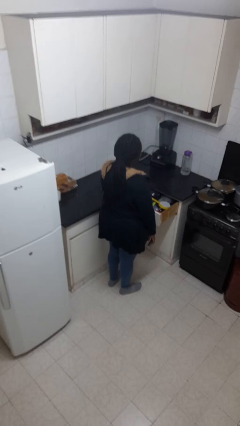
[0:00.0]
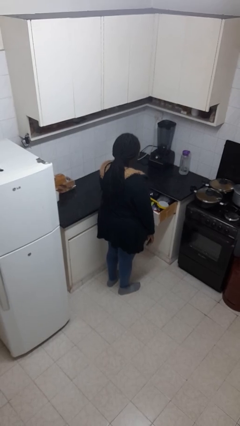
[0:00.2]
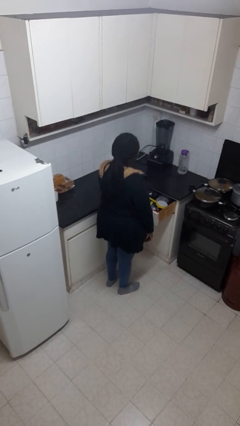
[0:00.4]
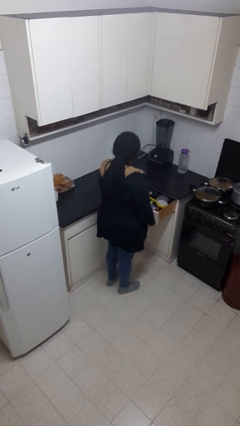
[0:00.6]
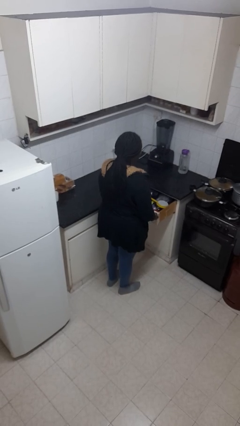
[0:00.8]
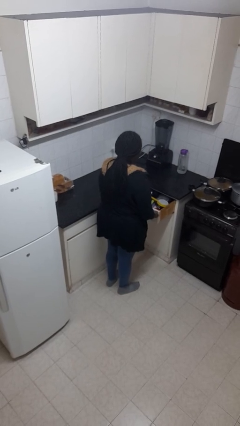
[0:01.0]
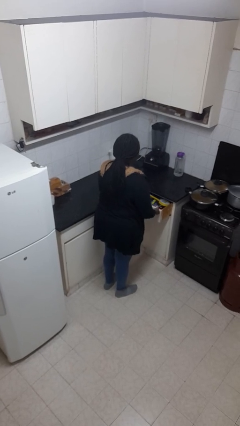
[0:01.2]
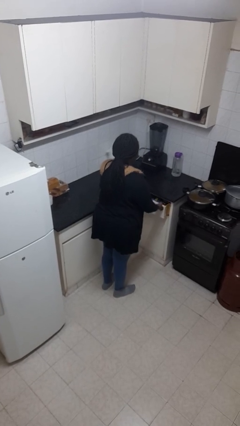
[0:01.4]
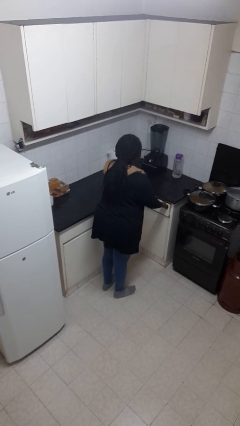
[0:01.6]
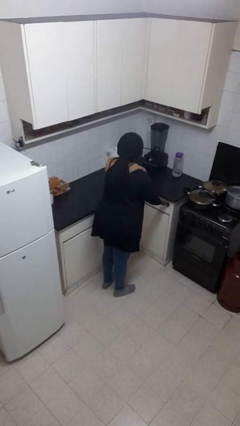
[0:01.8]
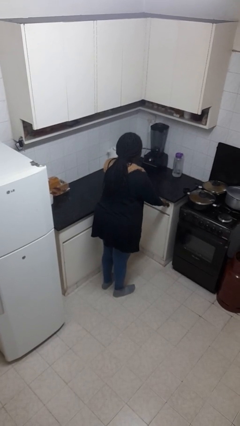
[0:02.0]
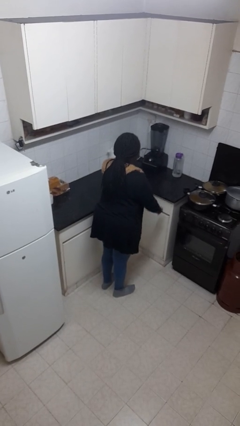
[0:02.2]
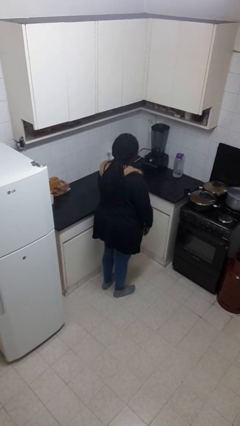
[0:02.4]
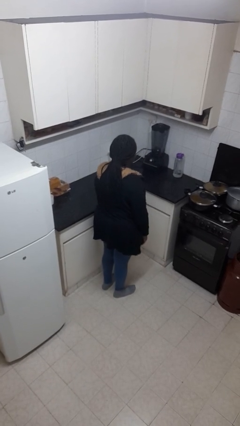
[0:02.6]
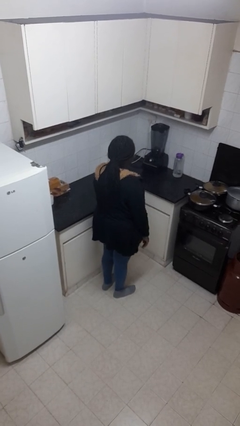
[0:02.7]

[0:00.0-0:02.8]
person closes kitchen drawer

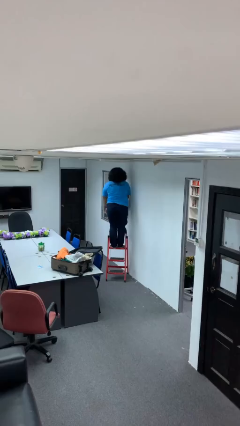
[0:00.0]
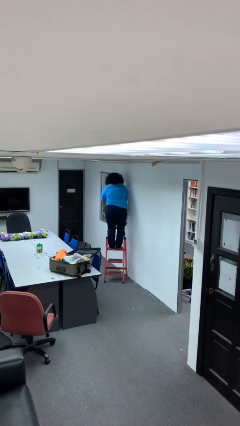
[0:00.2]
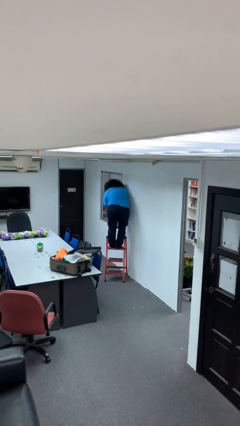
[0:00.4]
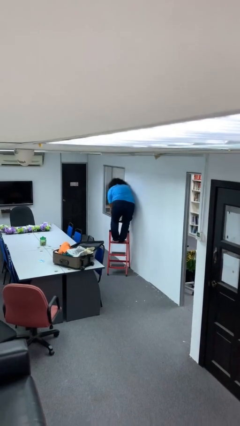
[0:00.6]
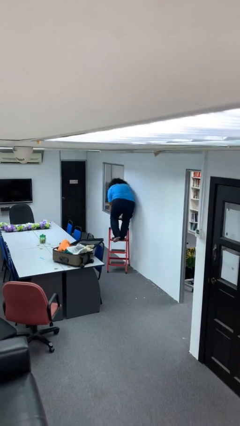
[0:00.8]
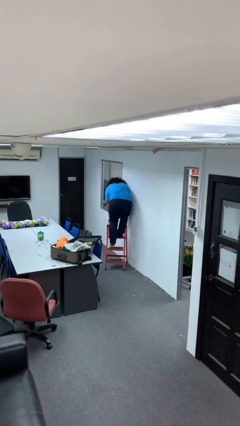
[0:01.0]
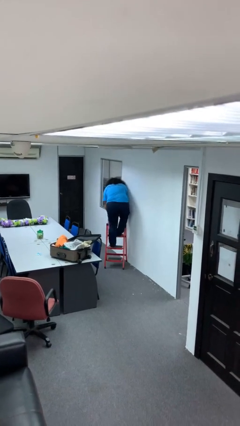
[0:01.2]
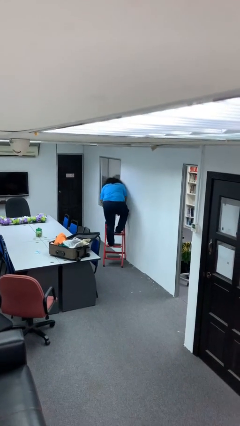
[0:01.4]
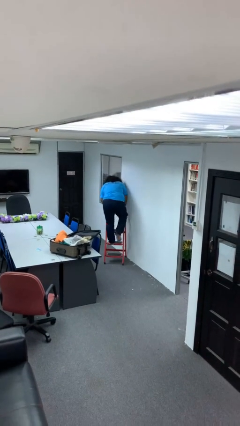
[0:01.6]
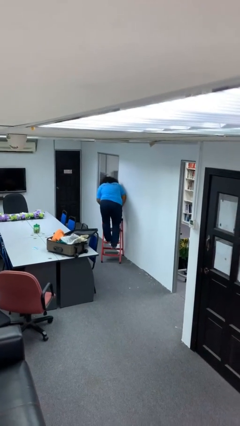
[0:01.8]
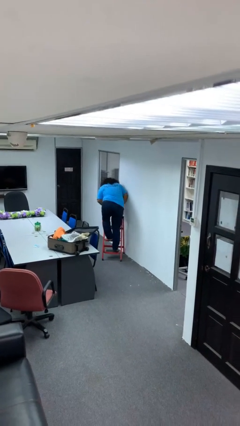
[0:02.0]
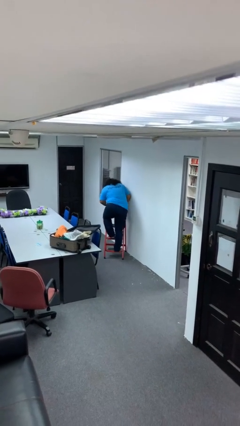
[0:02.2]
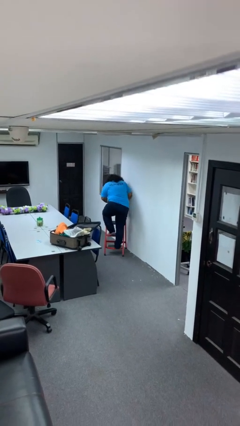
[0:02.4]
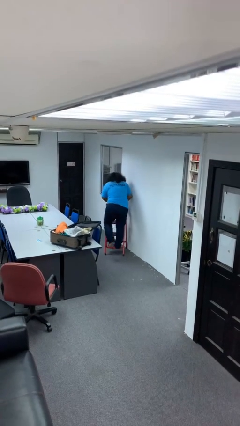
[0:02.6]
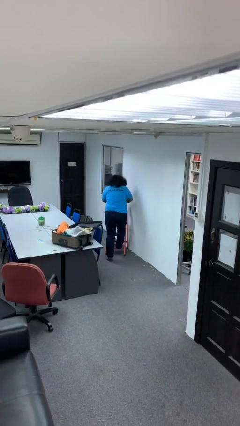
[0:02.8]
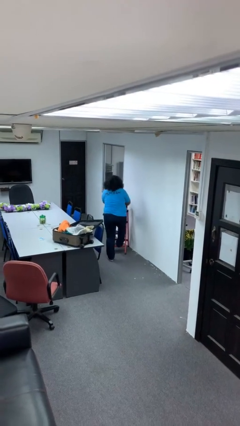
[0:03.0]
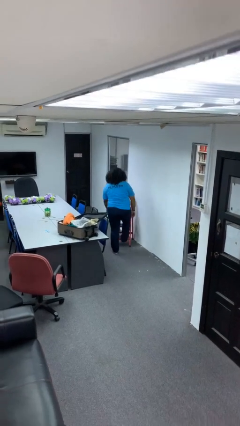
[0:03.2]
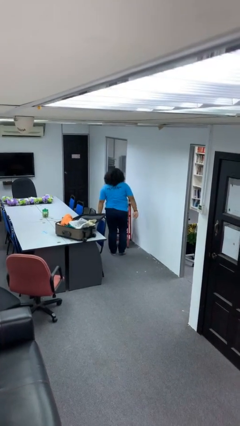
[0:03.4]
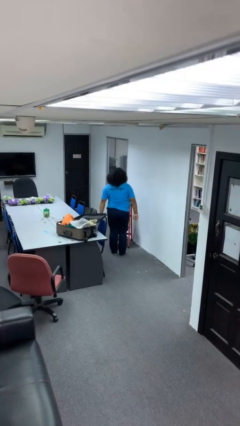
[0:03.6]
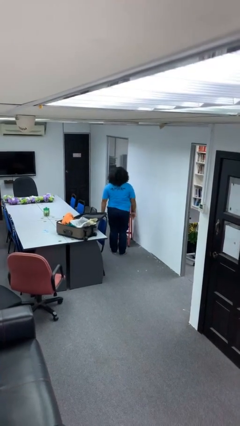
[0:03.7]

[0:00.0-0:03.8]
person climbs down ladder

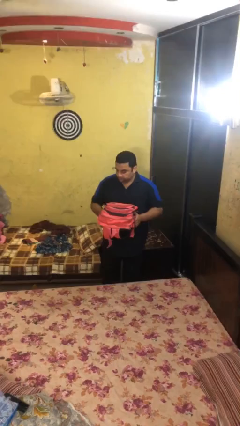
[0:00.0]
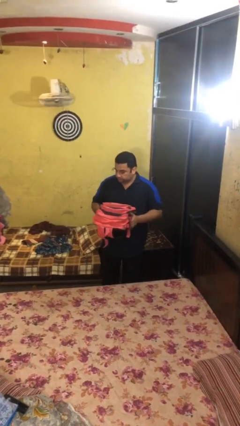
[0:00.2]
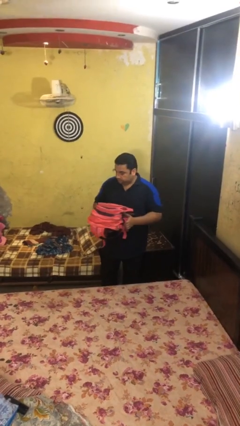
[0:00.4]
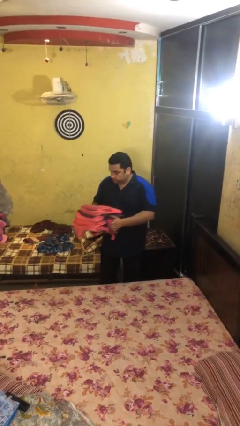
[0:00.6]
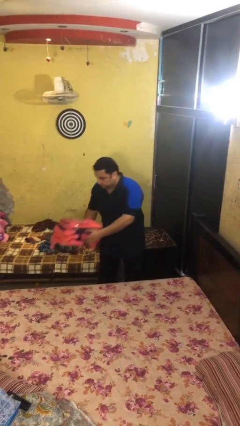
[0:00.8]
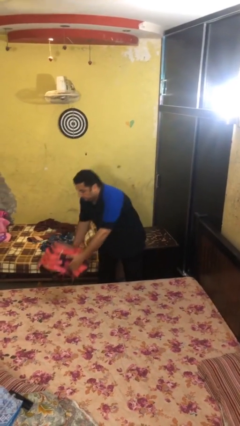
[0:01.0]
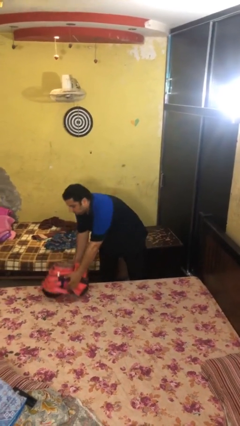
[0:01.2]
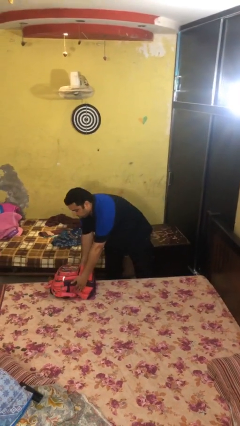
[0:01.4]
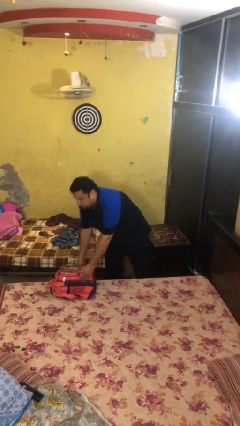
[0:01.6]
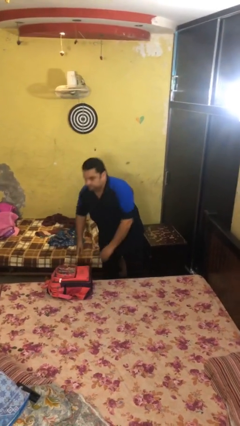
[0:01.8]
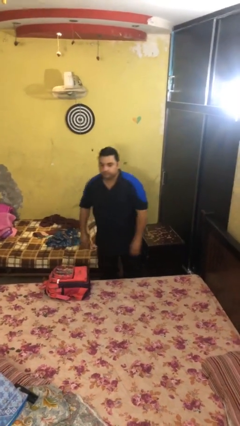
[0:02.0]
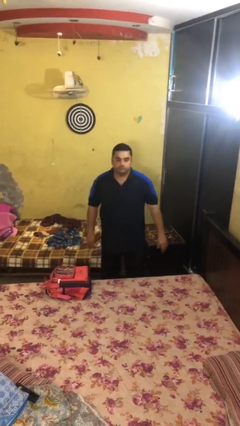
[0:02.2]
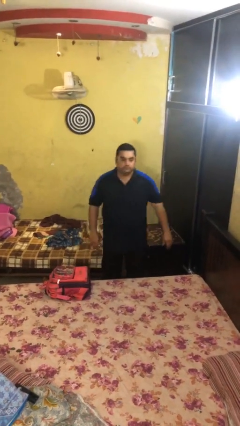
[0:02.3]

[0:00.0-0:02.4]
person puts down object on bed

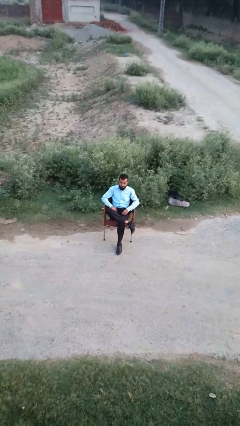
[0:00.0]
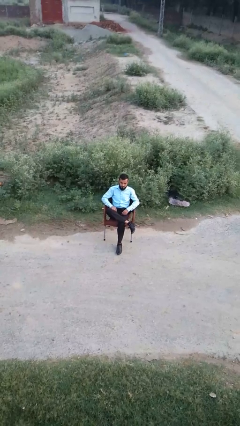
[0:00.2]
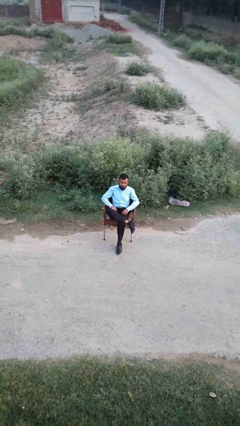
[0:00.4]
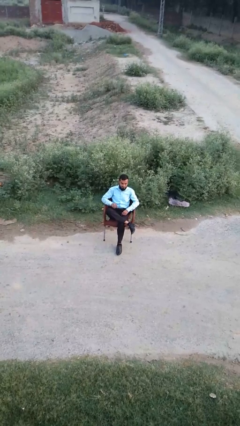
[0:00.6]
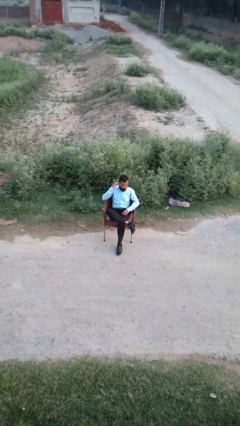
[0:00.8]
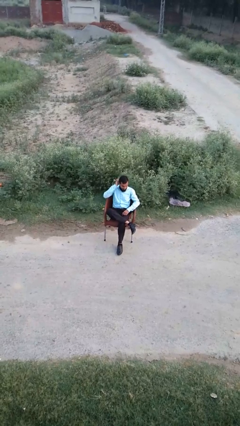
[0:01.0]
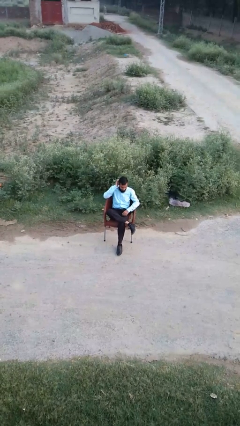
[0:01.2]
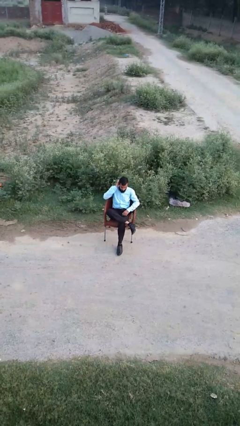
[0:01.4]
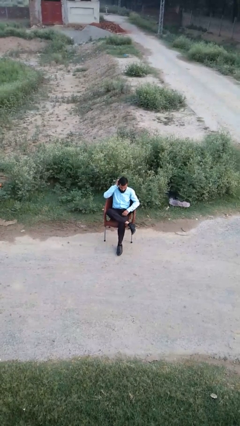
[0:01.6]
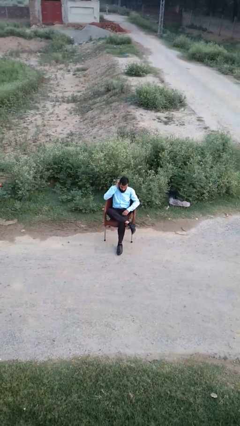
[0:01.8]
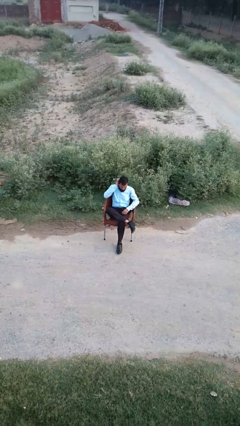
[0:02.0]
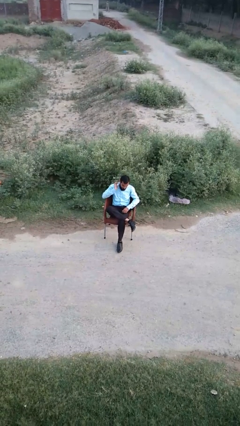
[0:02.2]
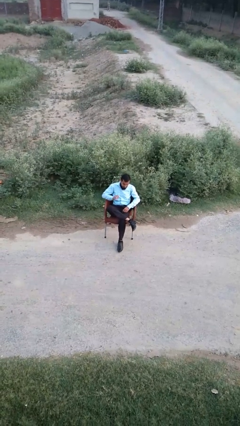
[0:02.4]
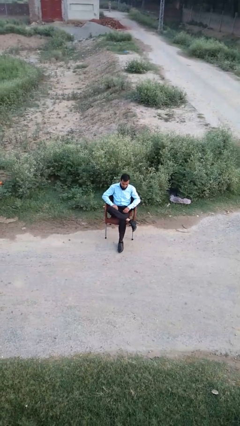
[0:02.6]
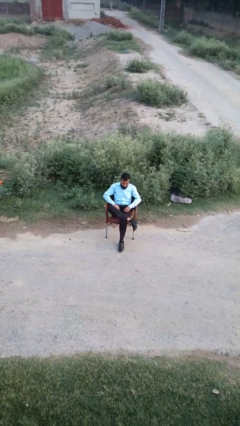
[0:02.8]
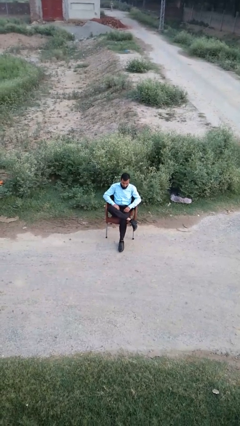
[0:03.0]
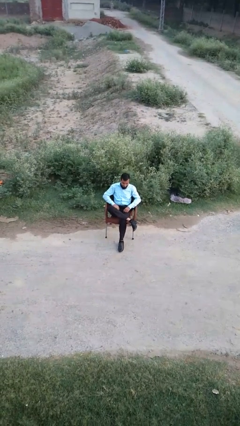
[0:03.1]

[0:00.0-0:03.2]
person scratches face

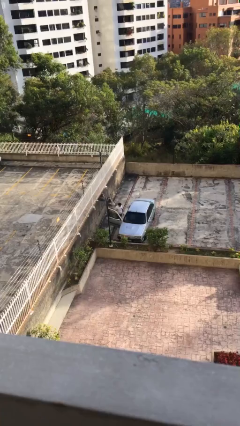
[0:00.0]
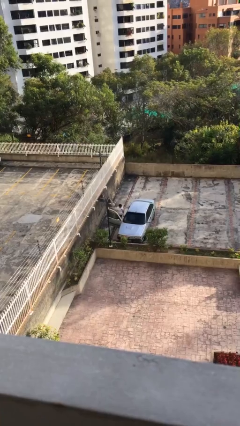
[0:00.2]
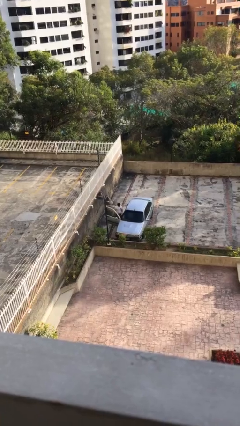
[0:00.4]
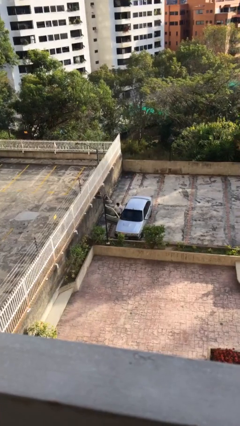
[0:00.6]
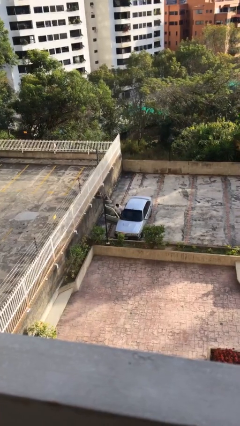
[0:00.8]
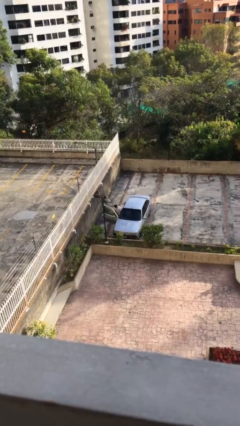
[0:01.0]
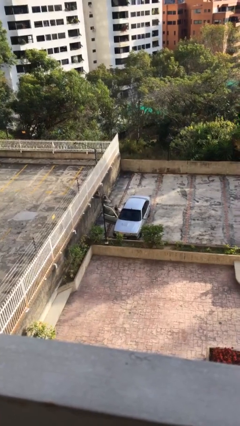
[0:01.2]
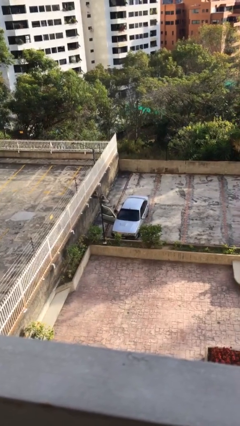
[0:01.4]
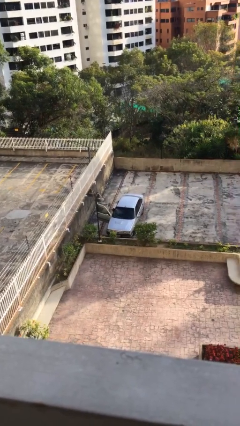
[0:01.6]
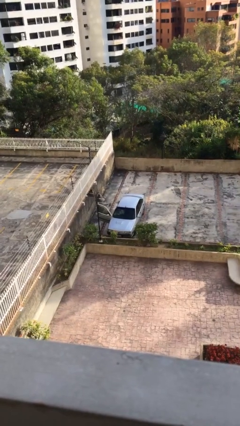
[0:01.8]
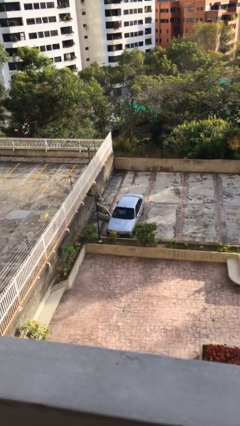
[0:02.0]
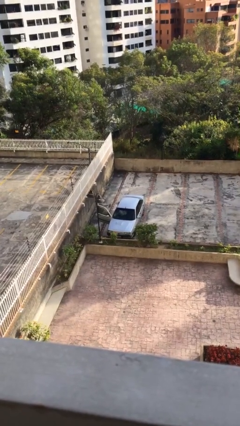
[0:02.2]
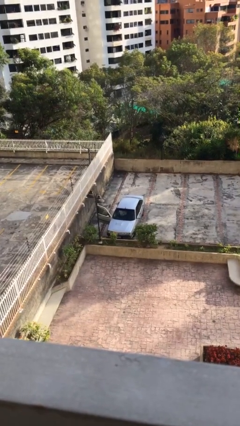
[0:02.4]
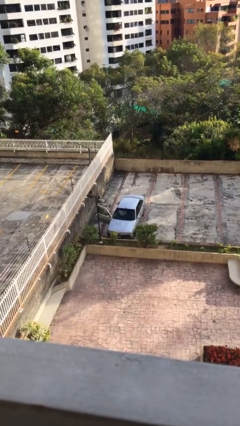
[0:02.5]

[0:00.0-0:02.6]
person enters car

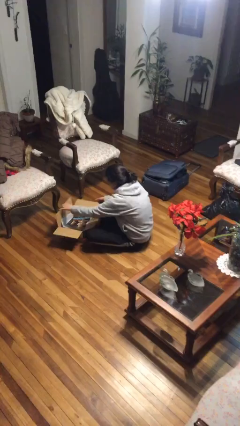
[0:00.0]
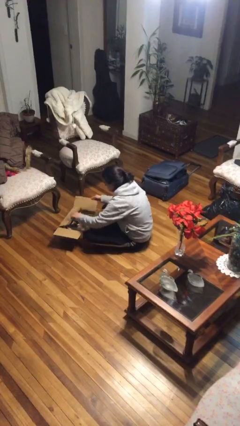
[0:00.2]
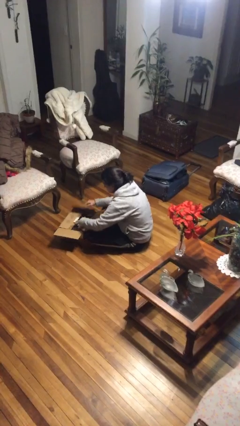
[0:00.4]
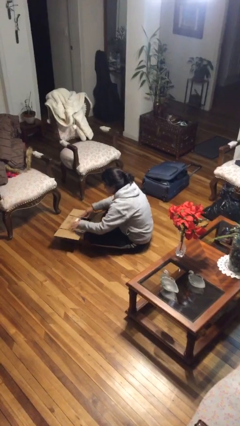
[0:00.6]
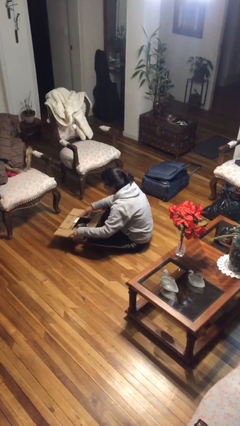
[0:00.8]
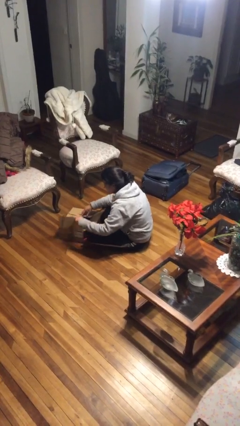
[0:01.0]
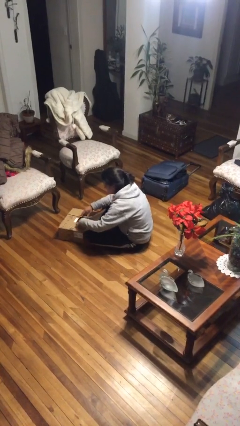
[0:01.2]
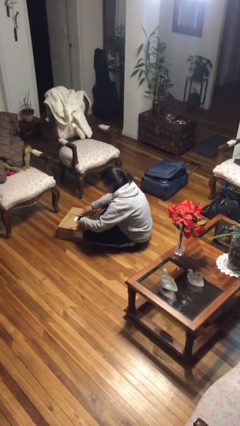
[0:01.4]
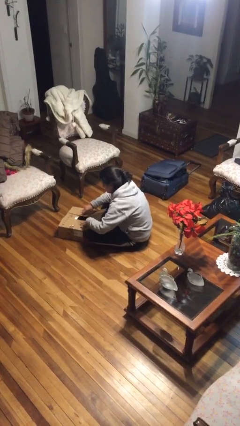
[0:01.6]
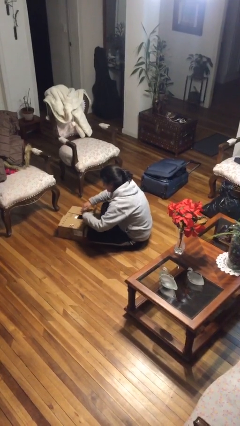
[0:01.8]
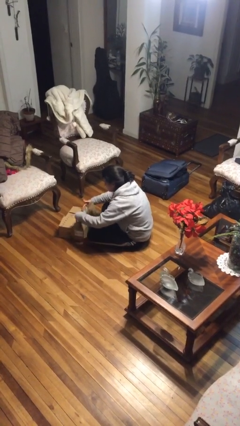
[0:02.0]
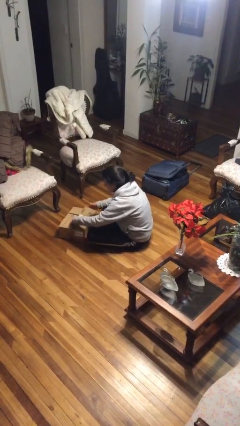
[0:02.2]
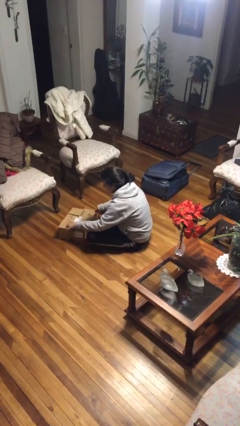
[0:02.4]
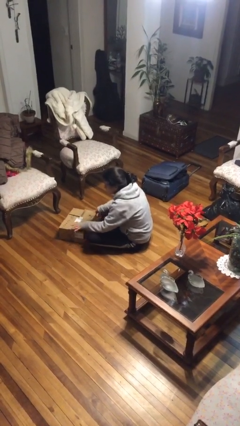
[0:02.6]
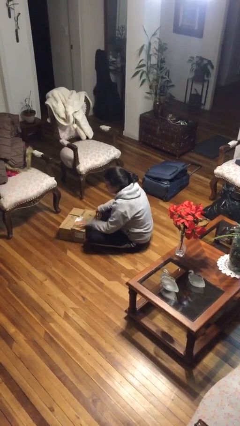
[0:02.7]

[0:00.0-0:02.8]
person closes box
